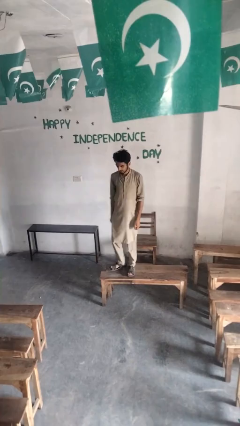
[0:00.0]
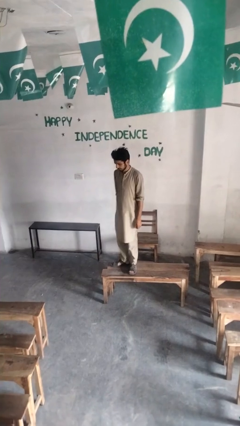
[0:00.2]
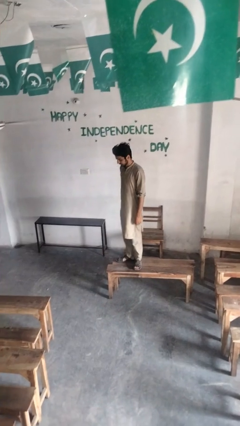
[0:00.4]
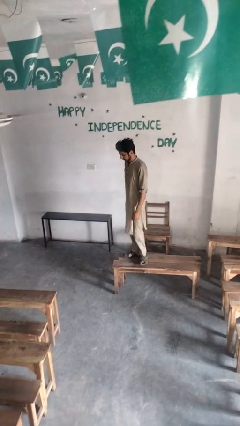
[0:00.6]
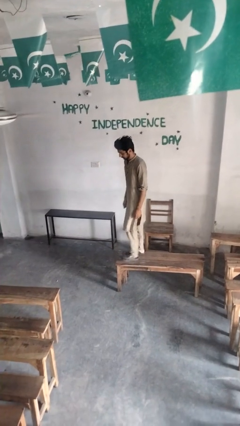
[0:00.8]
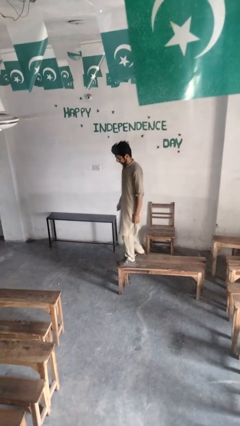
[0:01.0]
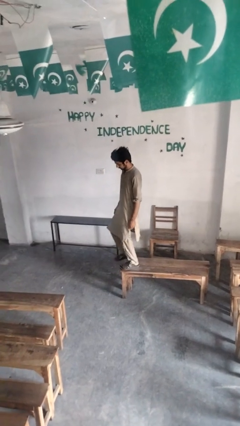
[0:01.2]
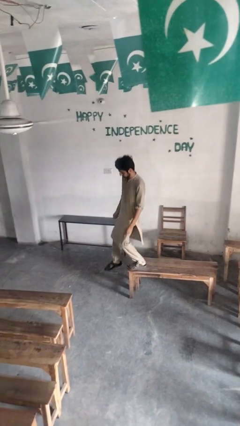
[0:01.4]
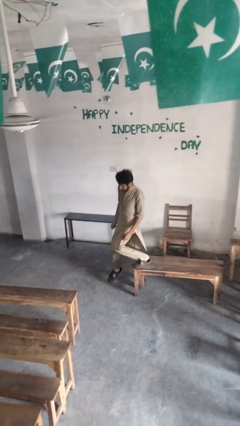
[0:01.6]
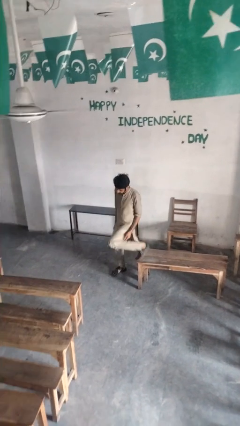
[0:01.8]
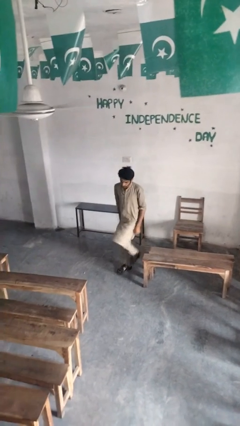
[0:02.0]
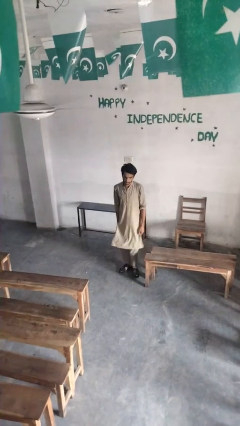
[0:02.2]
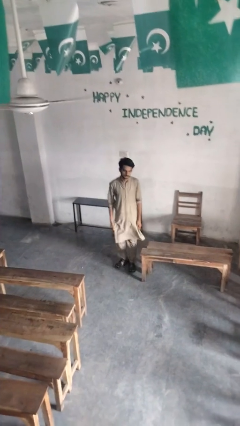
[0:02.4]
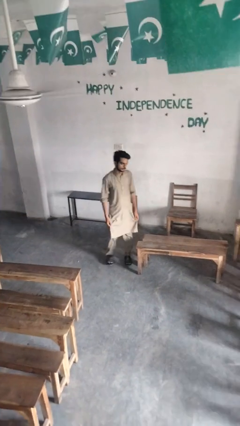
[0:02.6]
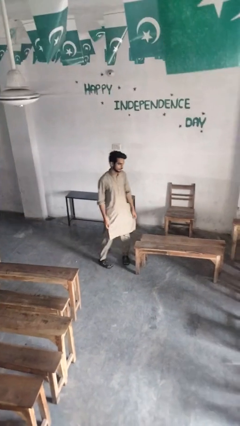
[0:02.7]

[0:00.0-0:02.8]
person climbs off table

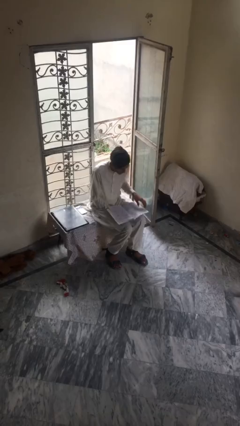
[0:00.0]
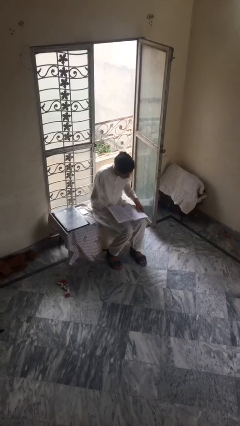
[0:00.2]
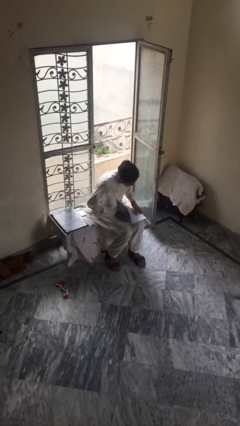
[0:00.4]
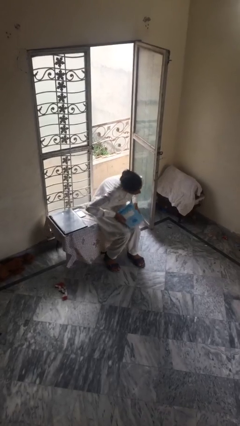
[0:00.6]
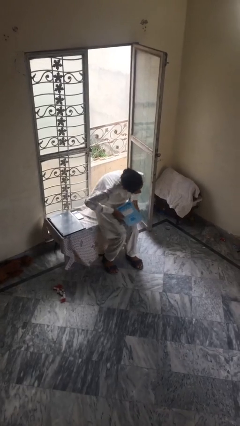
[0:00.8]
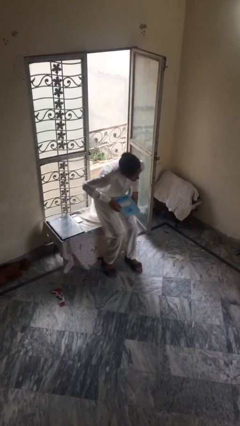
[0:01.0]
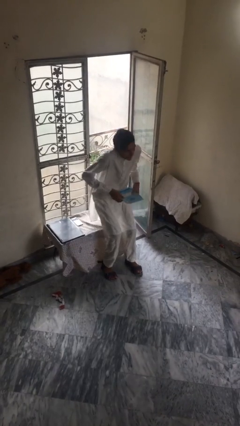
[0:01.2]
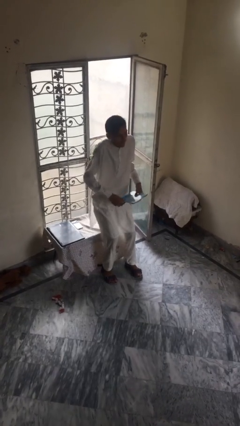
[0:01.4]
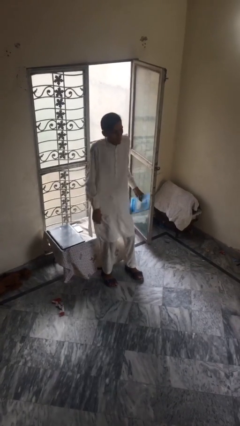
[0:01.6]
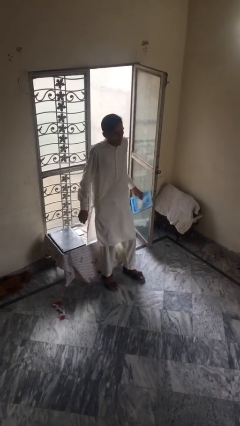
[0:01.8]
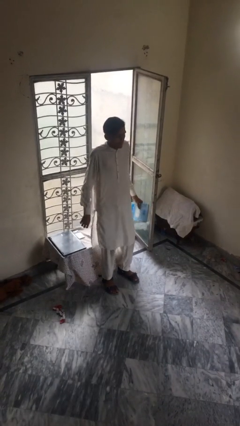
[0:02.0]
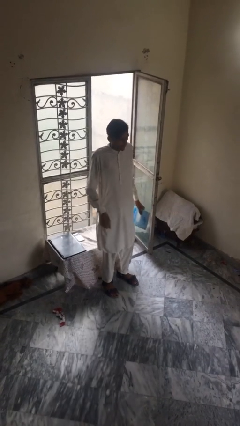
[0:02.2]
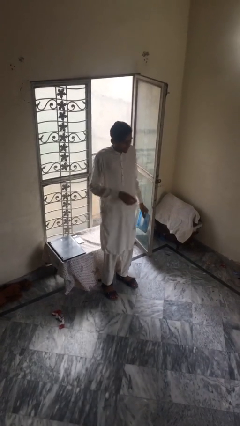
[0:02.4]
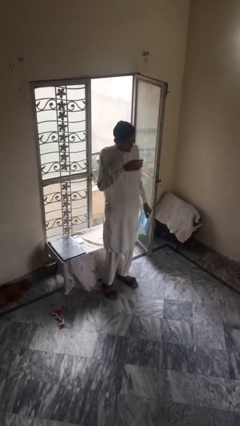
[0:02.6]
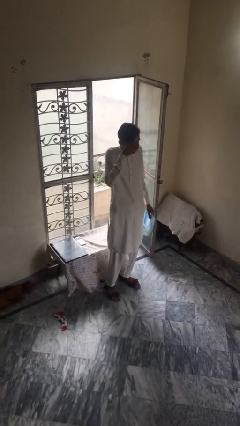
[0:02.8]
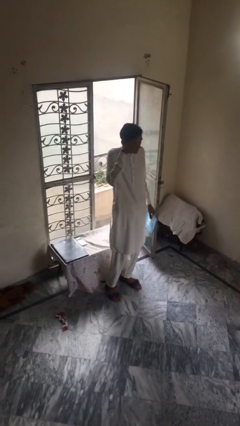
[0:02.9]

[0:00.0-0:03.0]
person stands up

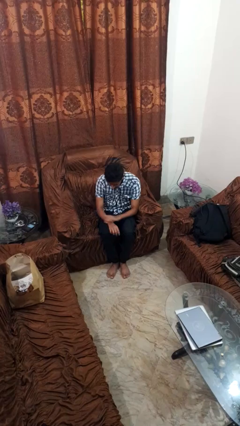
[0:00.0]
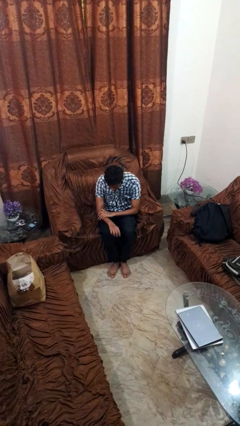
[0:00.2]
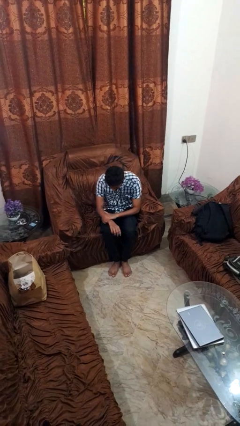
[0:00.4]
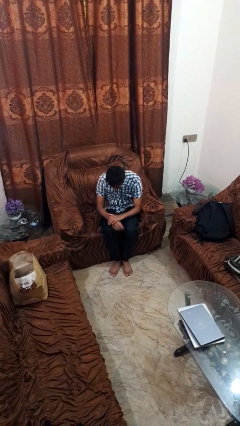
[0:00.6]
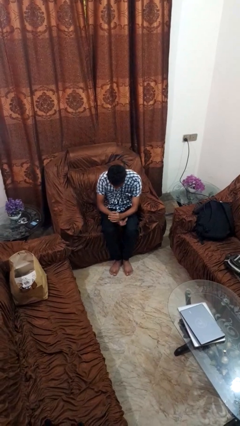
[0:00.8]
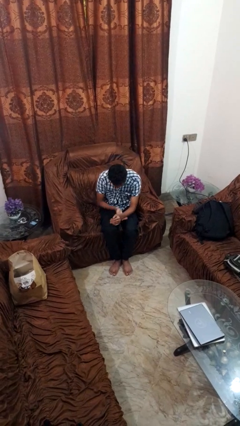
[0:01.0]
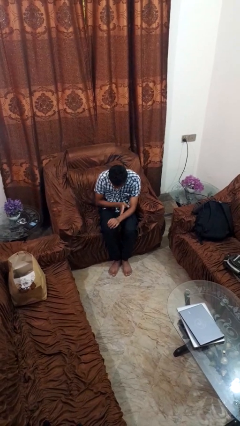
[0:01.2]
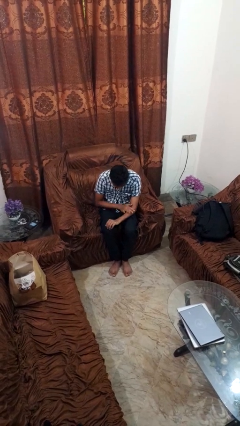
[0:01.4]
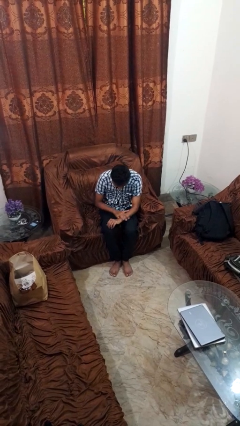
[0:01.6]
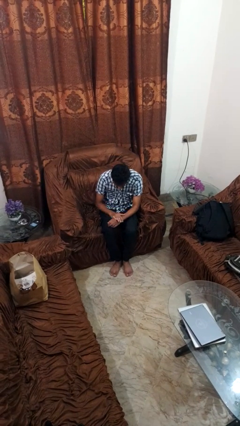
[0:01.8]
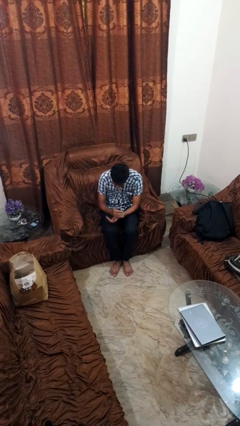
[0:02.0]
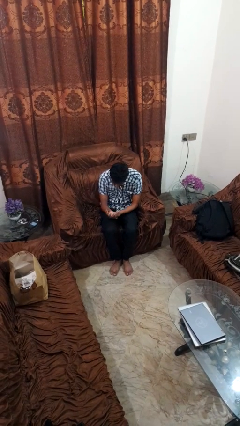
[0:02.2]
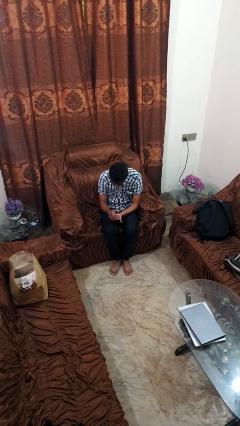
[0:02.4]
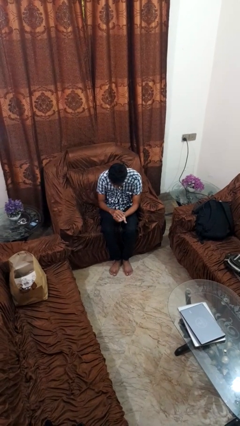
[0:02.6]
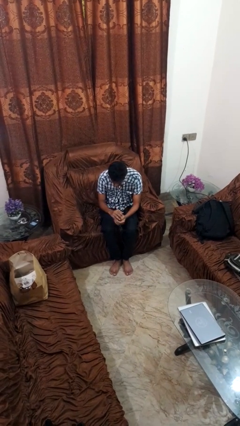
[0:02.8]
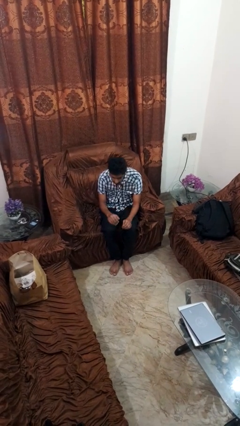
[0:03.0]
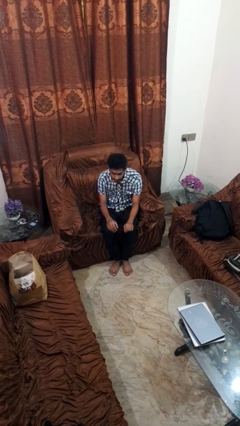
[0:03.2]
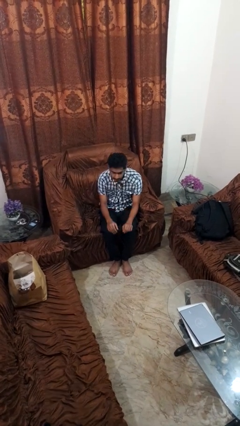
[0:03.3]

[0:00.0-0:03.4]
person looks at hands in lap

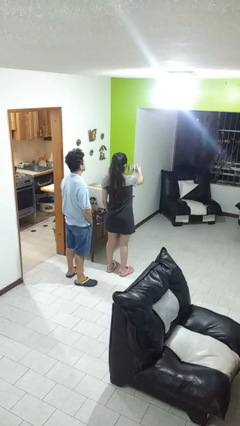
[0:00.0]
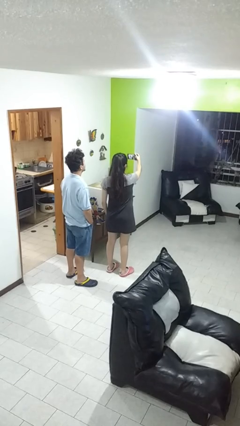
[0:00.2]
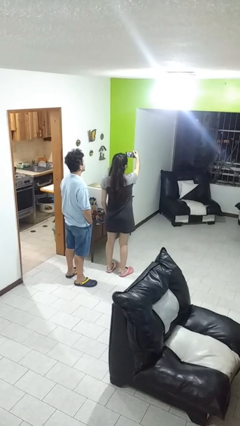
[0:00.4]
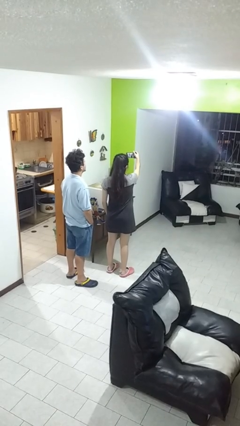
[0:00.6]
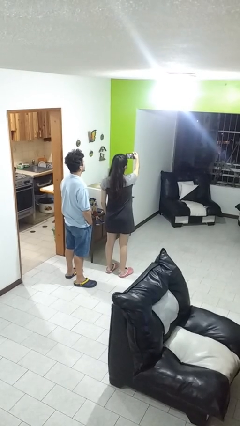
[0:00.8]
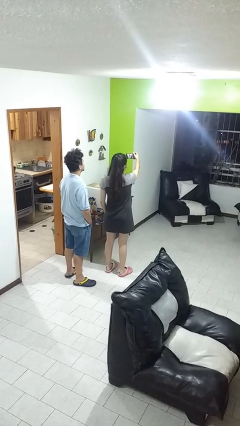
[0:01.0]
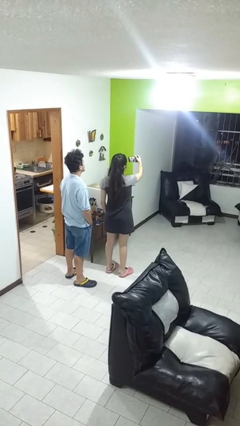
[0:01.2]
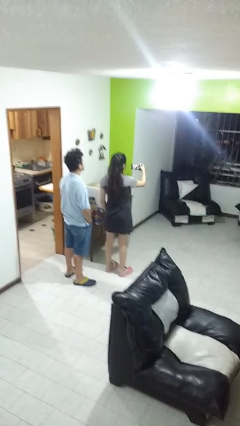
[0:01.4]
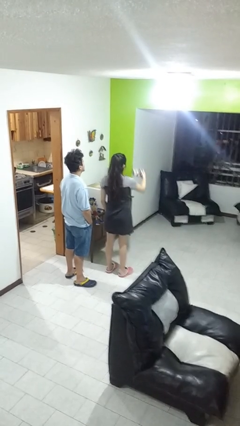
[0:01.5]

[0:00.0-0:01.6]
person takes selfie with person

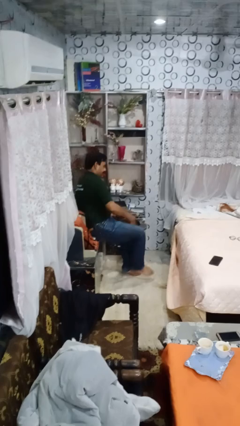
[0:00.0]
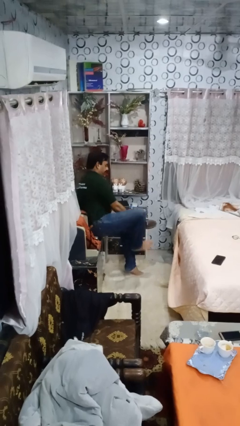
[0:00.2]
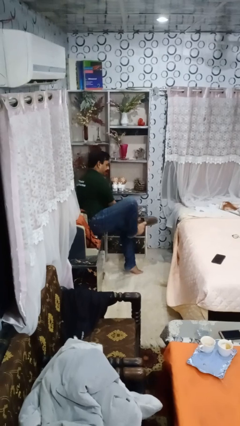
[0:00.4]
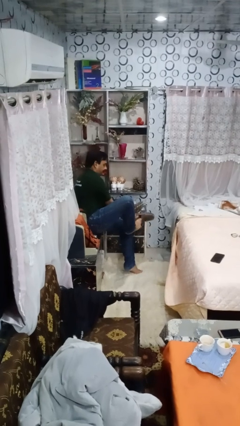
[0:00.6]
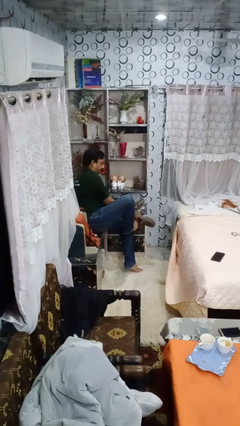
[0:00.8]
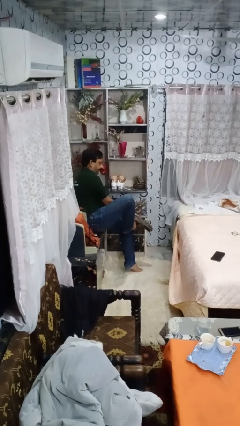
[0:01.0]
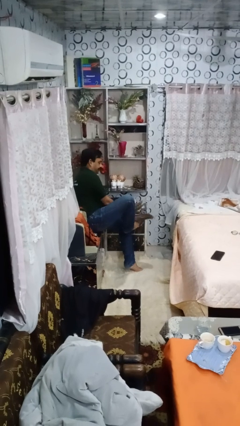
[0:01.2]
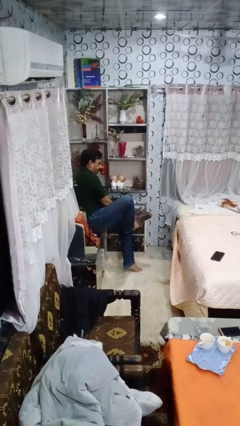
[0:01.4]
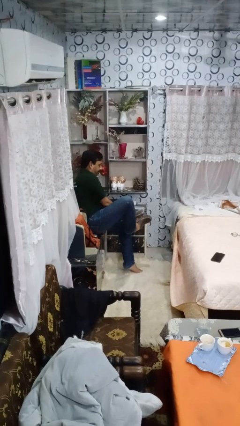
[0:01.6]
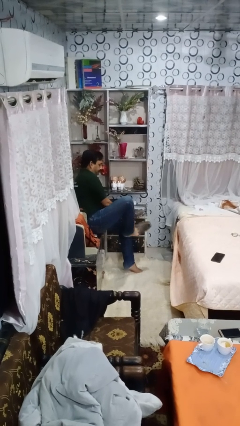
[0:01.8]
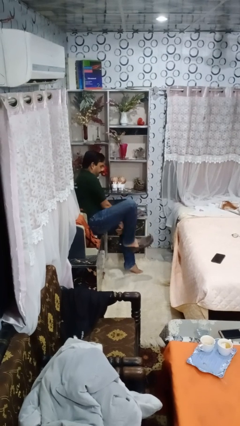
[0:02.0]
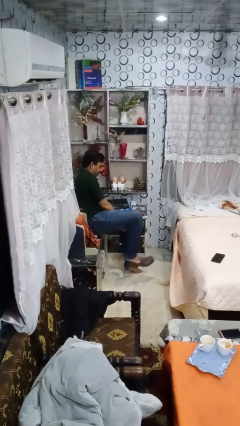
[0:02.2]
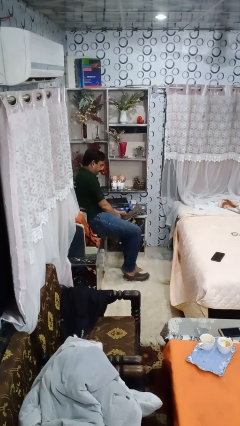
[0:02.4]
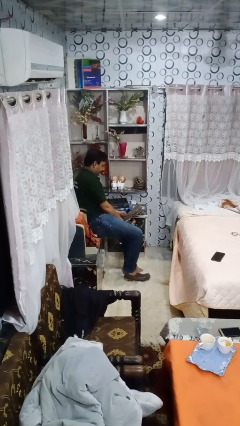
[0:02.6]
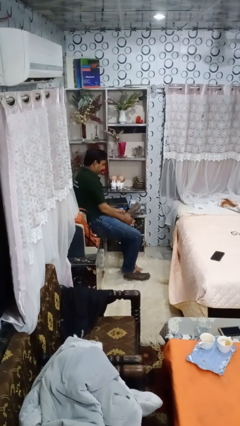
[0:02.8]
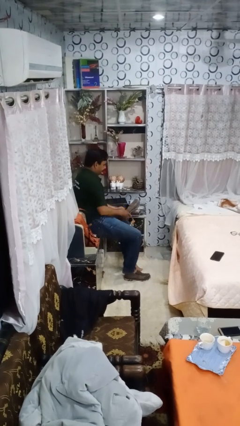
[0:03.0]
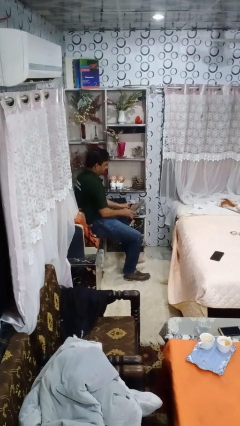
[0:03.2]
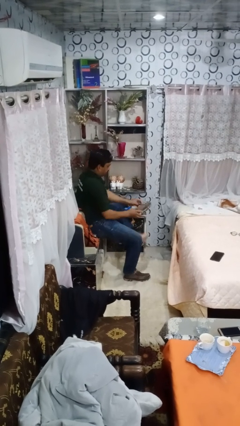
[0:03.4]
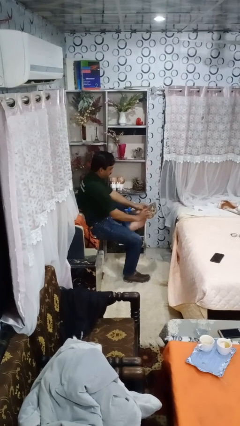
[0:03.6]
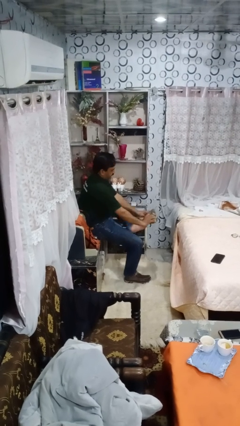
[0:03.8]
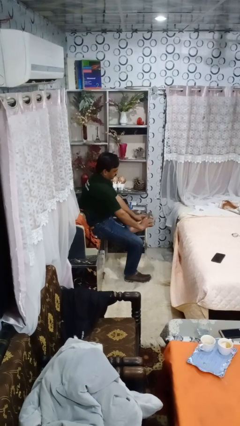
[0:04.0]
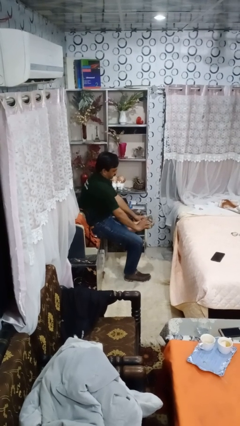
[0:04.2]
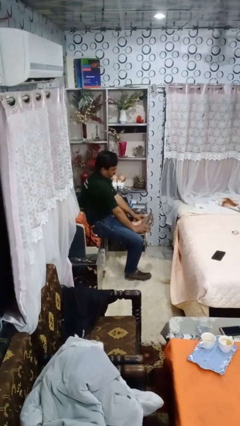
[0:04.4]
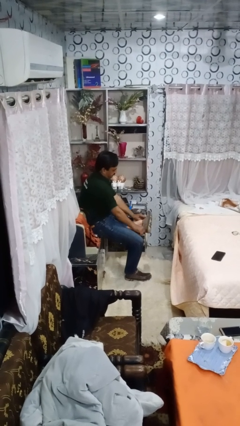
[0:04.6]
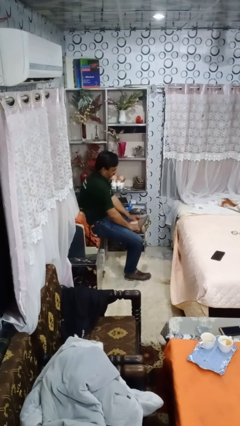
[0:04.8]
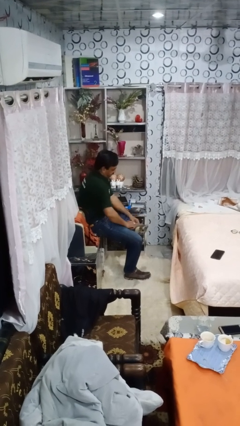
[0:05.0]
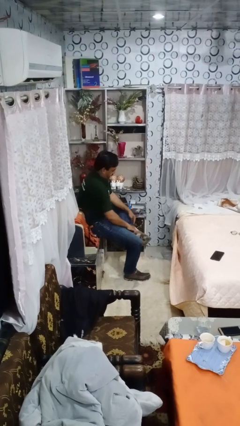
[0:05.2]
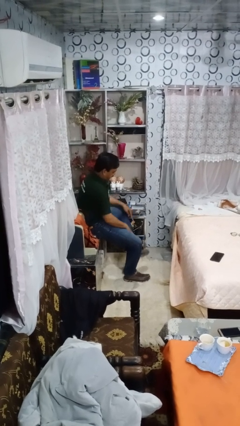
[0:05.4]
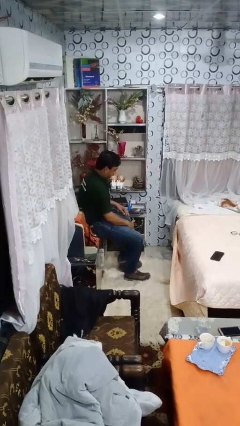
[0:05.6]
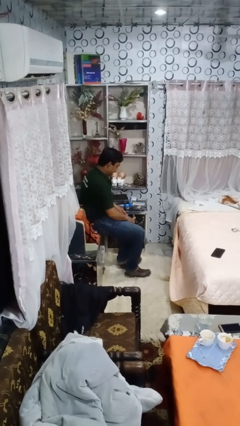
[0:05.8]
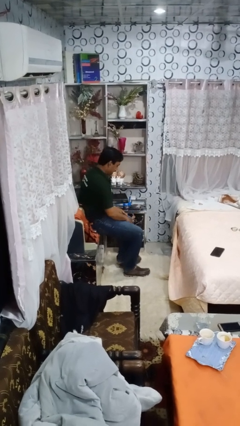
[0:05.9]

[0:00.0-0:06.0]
person puts on shoes

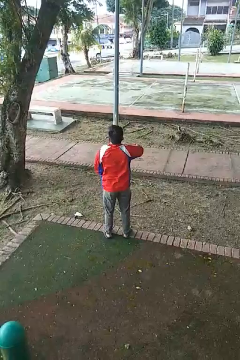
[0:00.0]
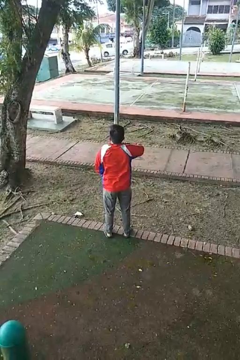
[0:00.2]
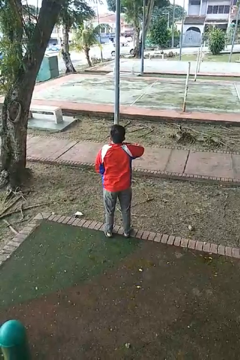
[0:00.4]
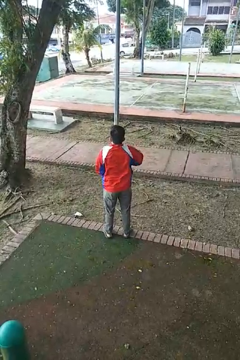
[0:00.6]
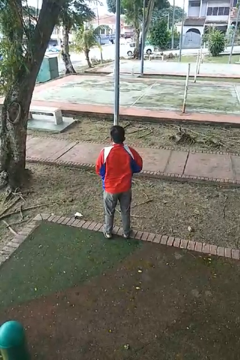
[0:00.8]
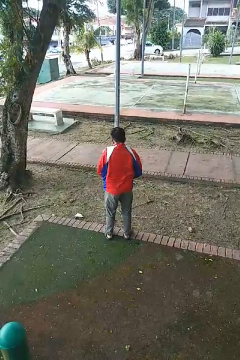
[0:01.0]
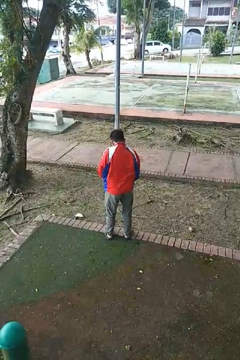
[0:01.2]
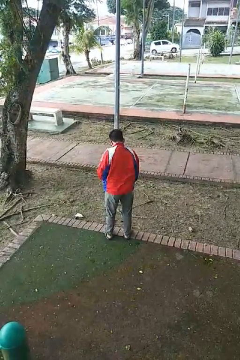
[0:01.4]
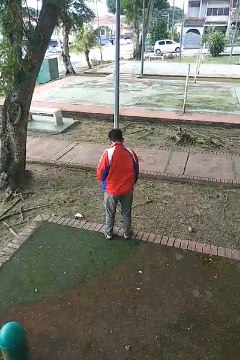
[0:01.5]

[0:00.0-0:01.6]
person unzips jacket
